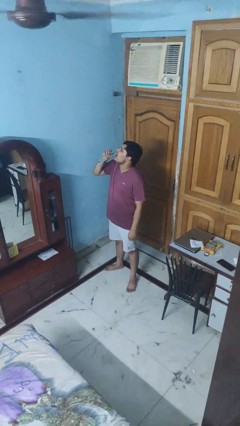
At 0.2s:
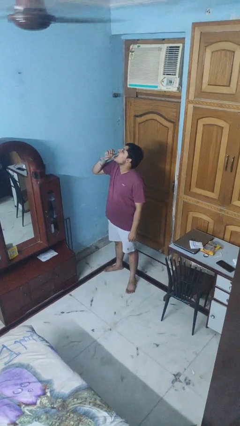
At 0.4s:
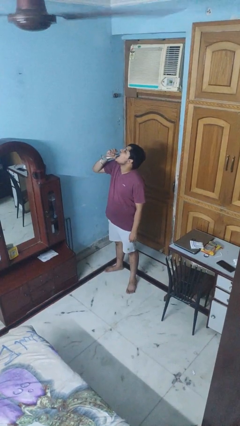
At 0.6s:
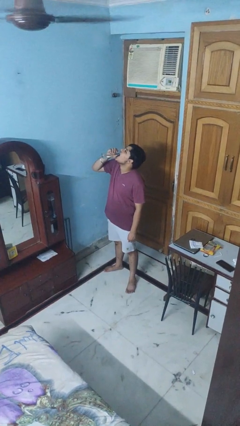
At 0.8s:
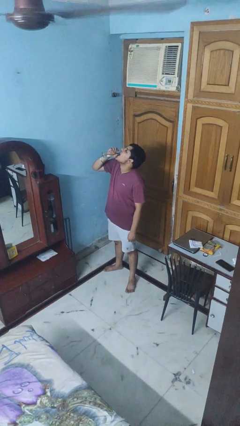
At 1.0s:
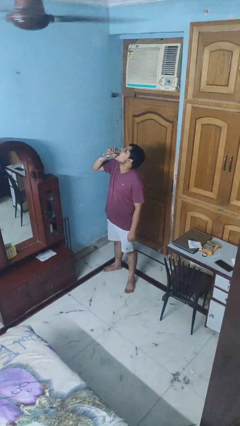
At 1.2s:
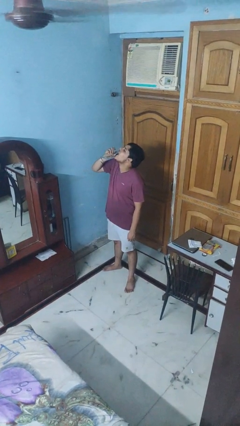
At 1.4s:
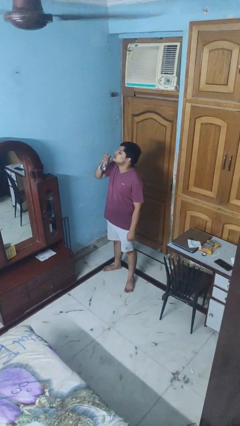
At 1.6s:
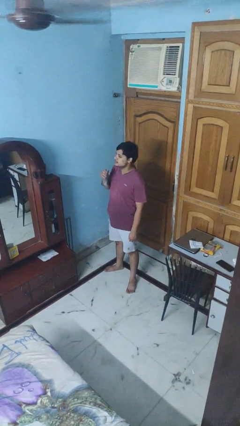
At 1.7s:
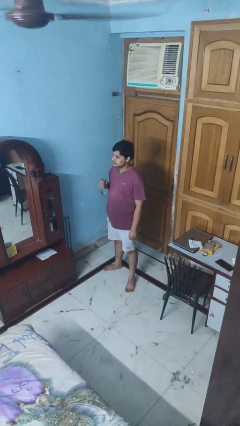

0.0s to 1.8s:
person drinks from bottle

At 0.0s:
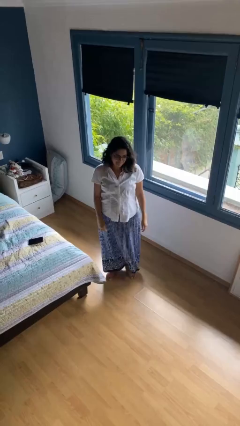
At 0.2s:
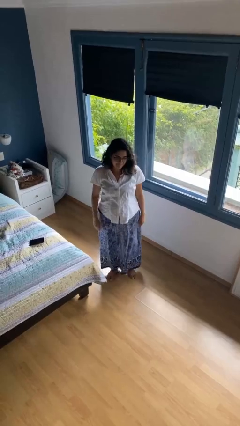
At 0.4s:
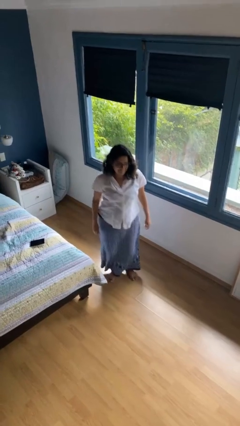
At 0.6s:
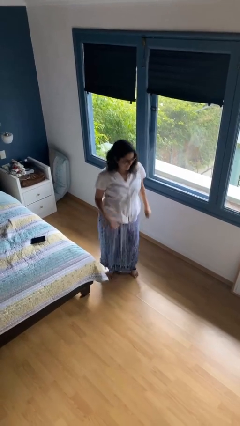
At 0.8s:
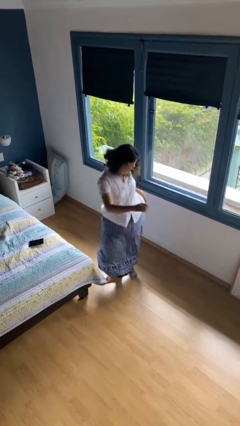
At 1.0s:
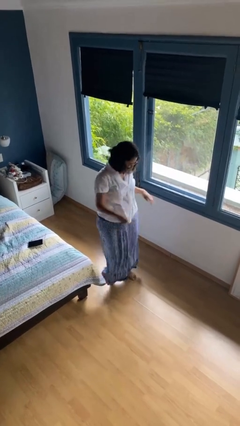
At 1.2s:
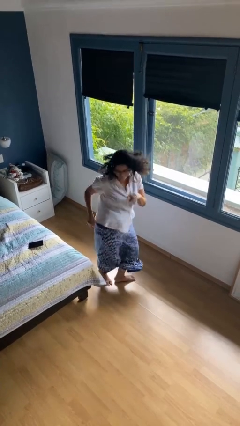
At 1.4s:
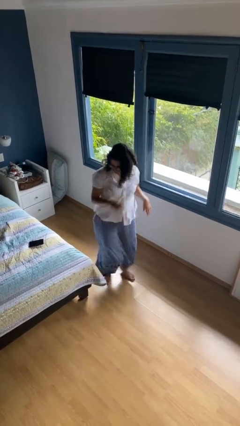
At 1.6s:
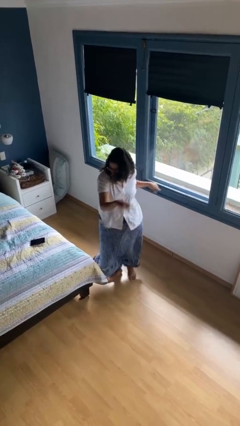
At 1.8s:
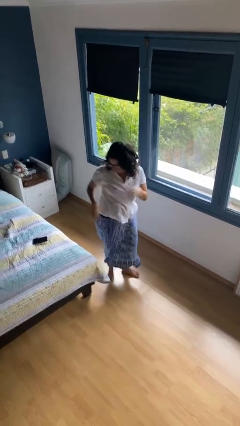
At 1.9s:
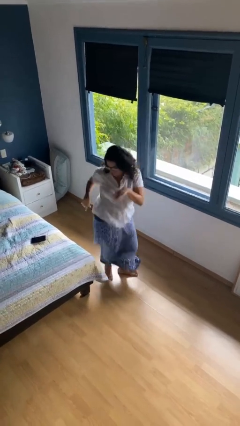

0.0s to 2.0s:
person dances in place

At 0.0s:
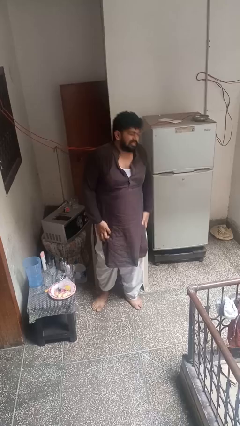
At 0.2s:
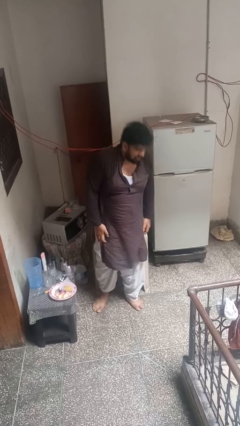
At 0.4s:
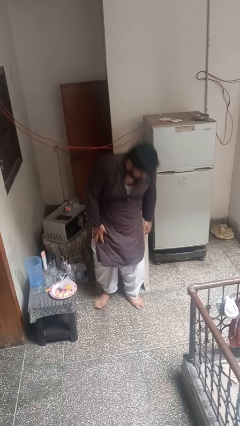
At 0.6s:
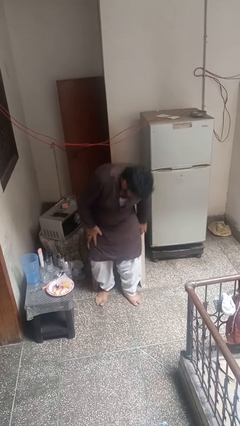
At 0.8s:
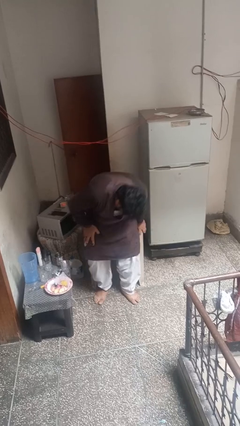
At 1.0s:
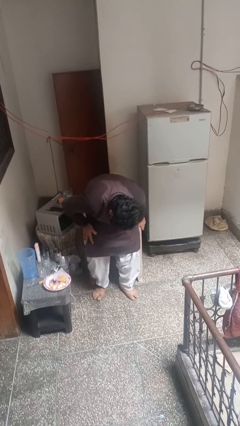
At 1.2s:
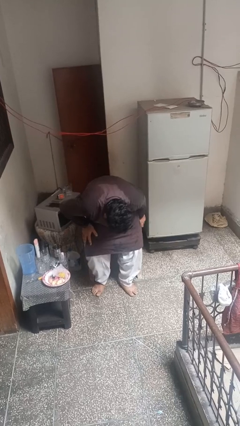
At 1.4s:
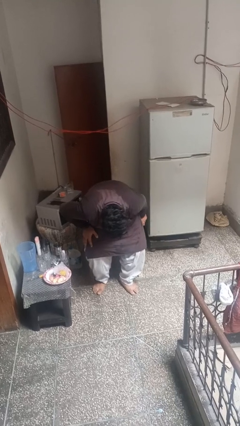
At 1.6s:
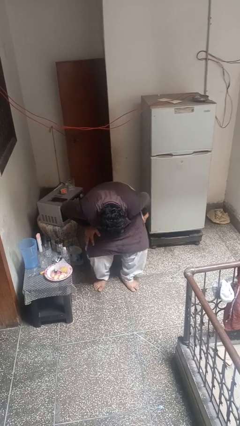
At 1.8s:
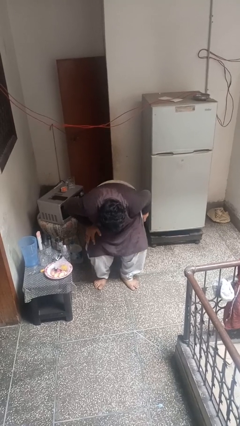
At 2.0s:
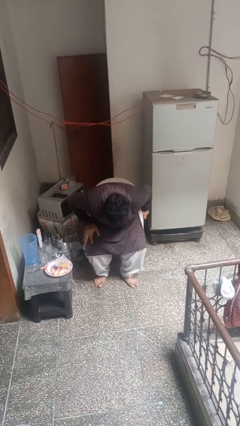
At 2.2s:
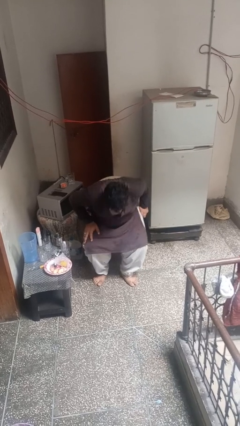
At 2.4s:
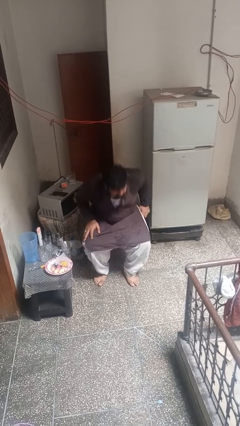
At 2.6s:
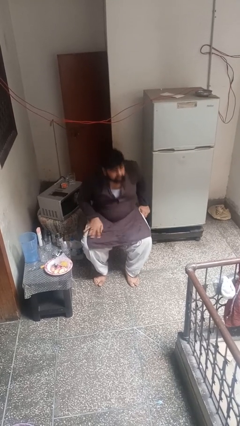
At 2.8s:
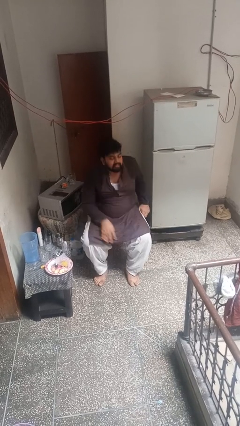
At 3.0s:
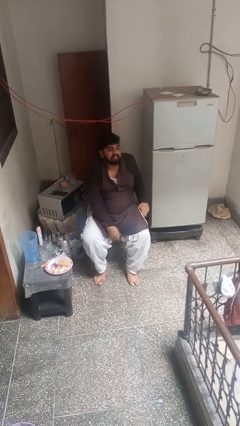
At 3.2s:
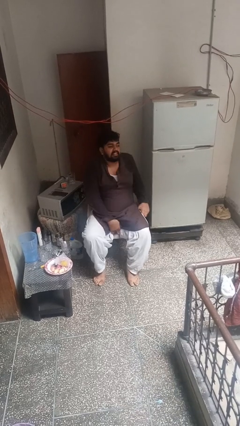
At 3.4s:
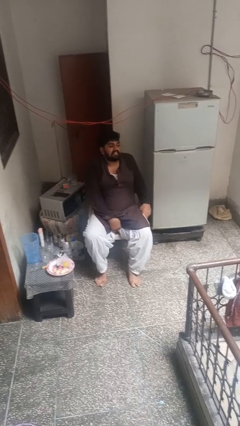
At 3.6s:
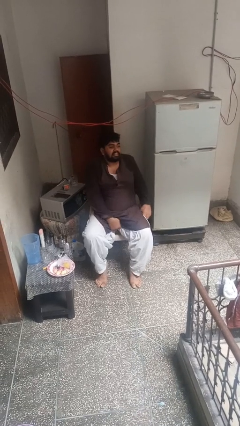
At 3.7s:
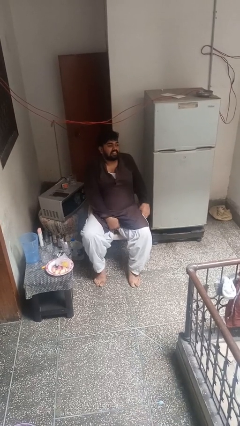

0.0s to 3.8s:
person sits down

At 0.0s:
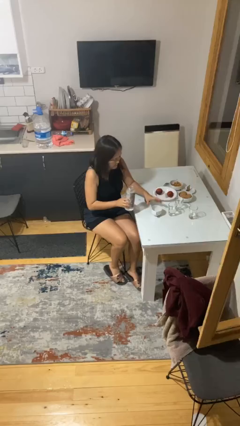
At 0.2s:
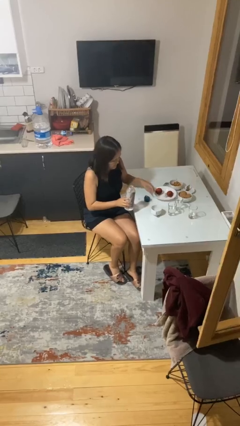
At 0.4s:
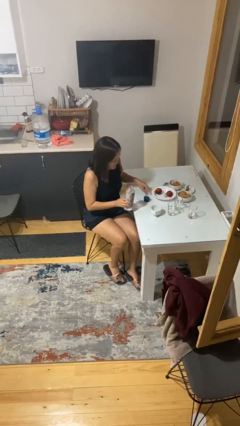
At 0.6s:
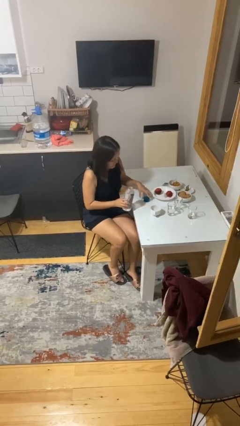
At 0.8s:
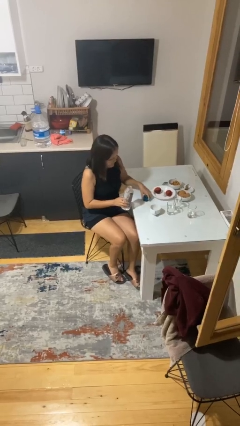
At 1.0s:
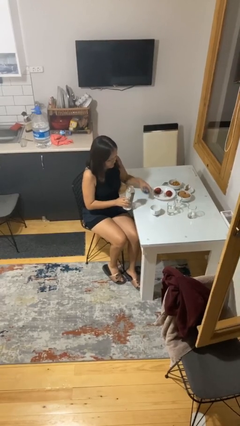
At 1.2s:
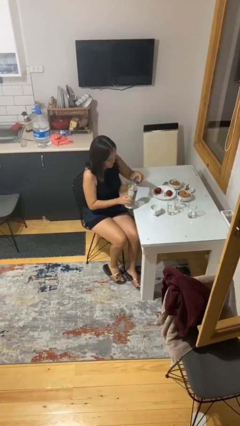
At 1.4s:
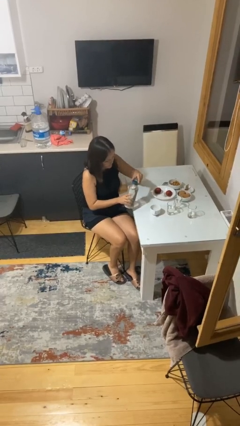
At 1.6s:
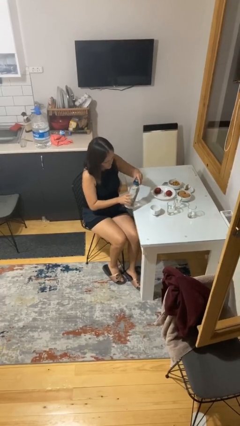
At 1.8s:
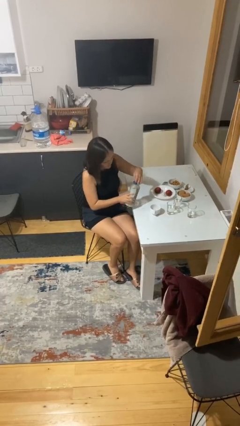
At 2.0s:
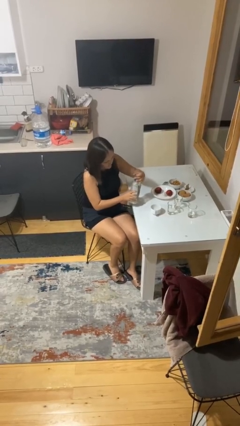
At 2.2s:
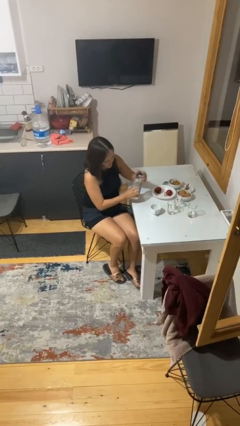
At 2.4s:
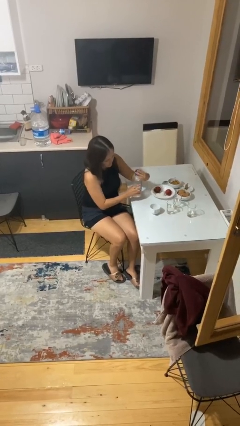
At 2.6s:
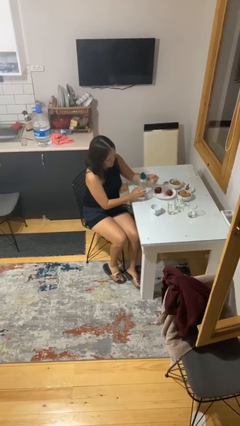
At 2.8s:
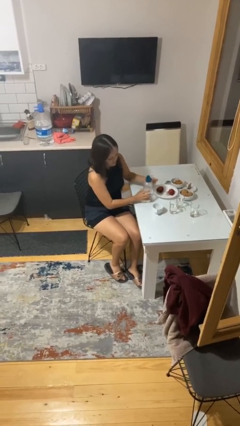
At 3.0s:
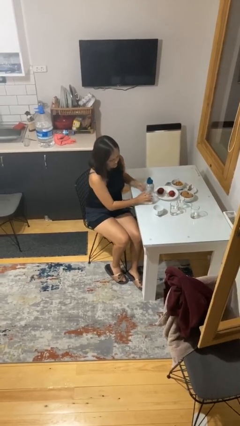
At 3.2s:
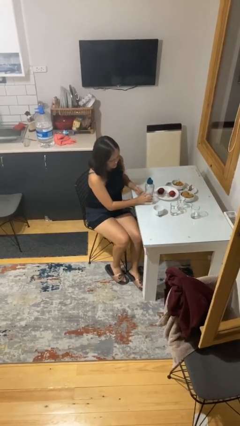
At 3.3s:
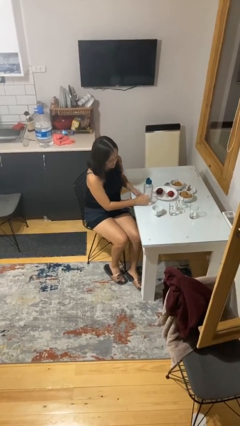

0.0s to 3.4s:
person screws lid to bottle

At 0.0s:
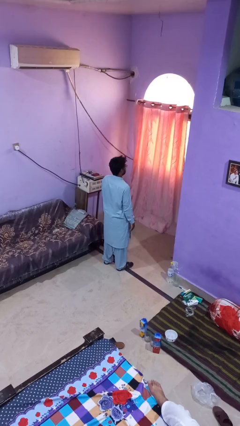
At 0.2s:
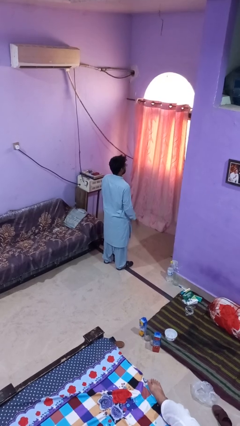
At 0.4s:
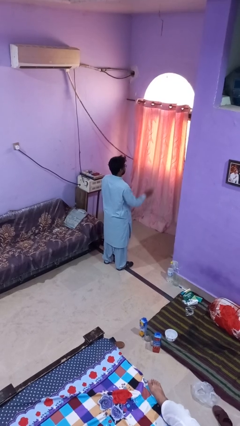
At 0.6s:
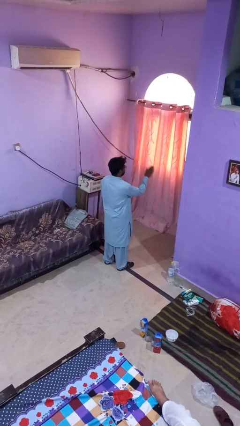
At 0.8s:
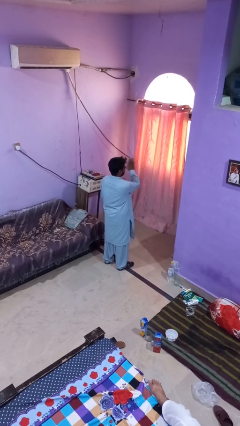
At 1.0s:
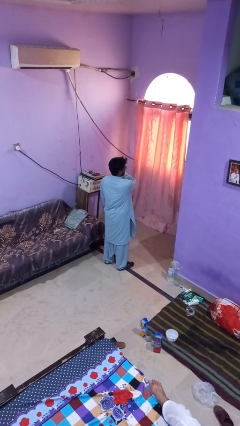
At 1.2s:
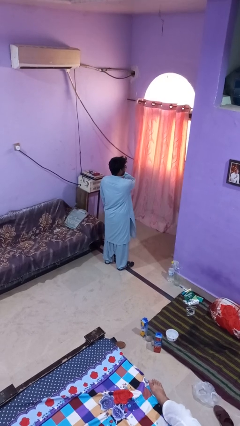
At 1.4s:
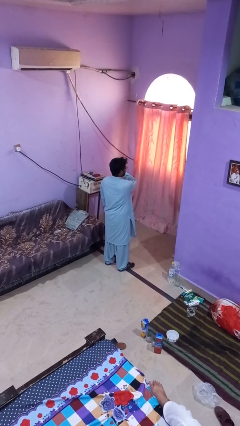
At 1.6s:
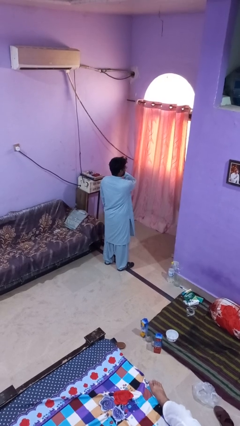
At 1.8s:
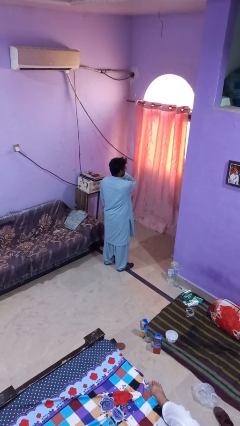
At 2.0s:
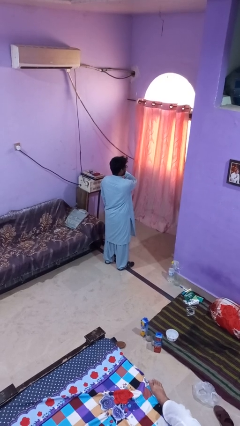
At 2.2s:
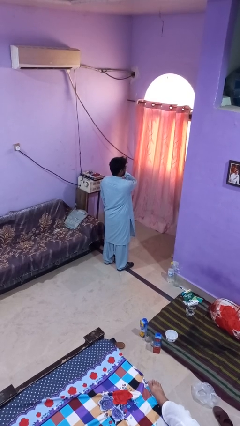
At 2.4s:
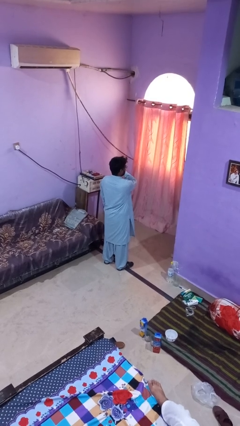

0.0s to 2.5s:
person gestures swipe left

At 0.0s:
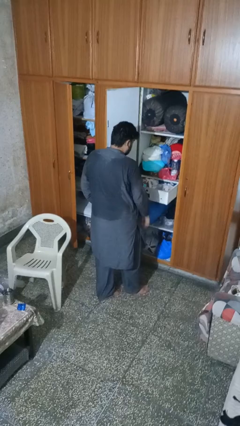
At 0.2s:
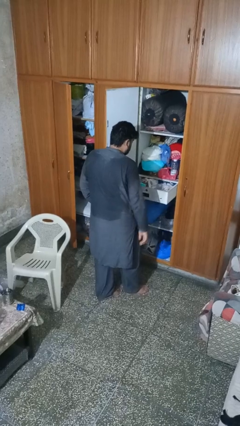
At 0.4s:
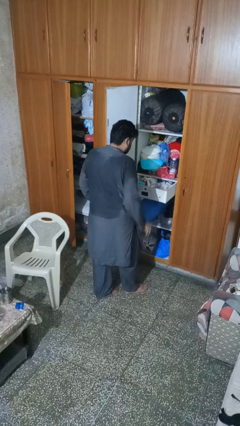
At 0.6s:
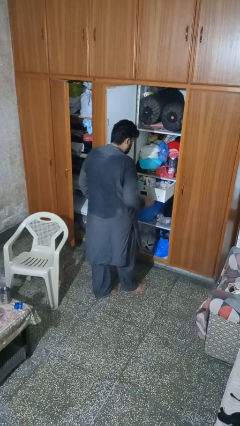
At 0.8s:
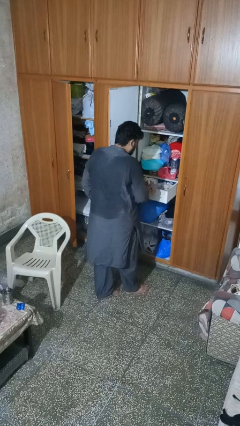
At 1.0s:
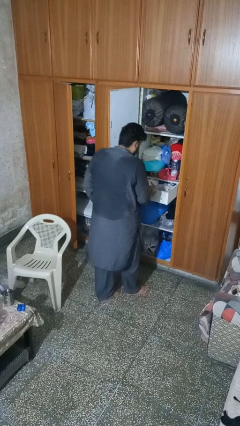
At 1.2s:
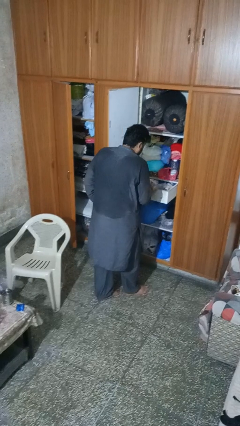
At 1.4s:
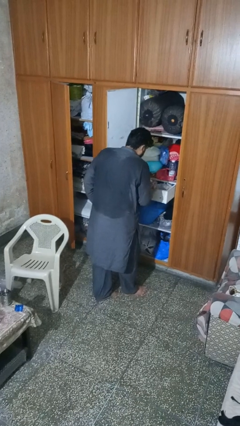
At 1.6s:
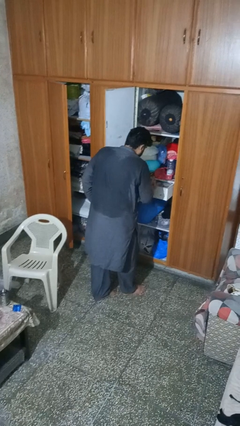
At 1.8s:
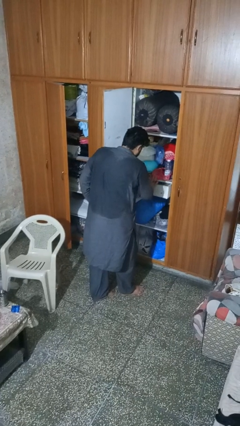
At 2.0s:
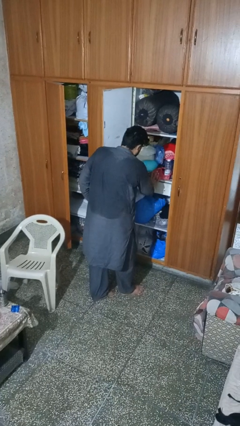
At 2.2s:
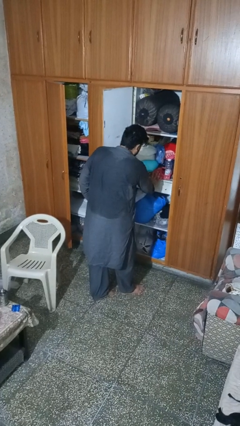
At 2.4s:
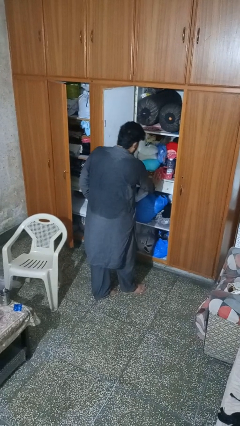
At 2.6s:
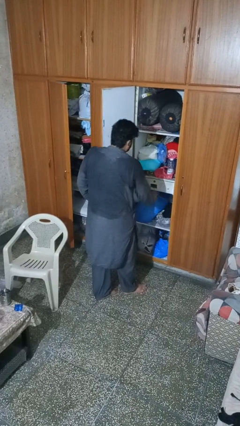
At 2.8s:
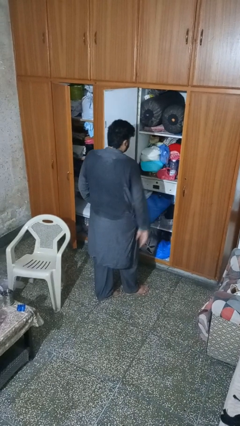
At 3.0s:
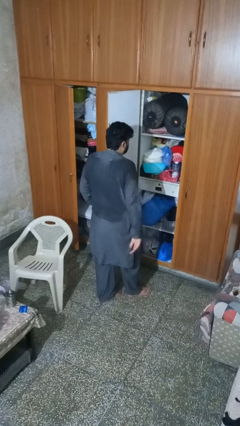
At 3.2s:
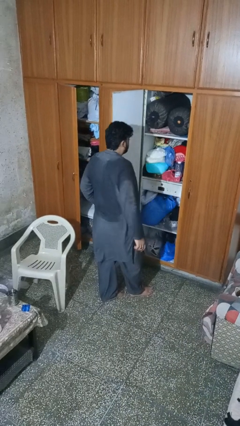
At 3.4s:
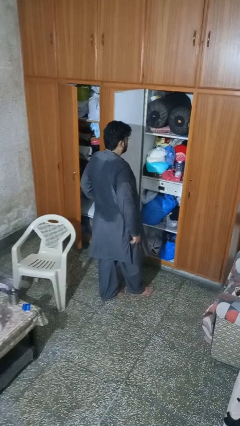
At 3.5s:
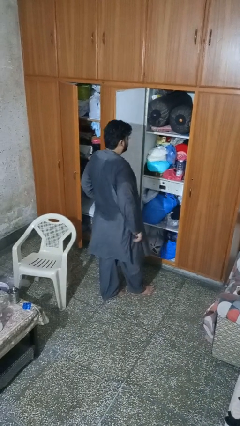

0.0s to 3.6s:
person closes dresser drawer

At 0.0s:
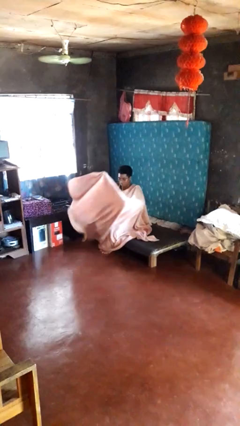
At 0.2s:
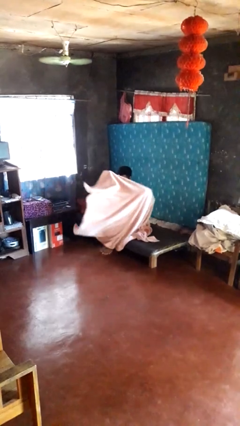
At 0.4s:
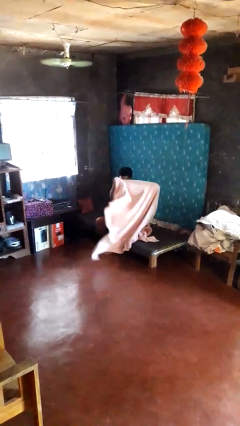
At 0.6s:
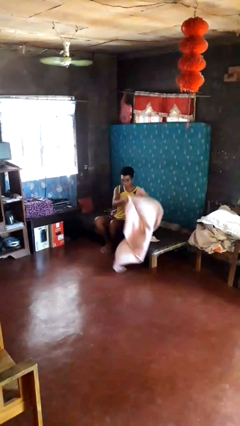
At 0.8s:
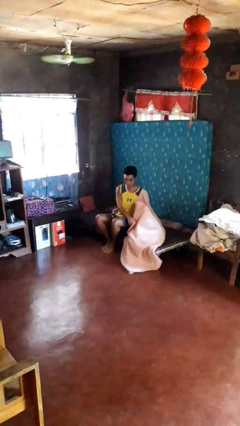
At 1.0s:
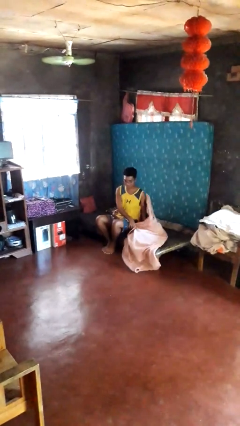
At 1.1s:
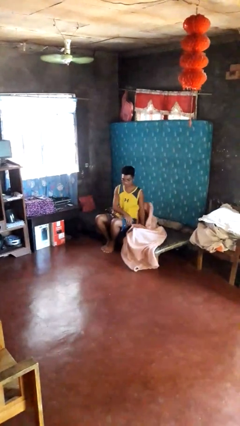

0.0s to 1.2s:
person uncovers with blanket
